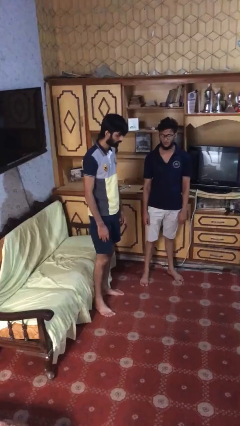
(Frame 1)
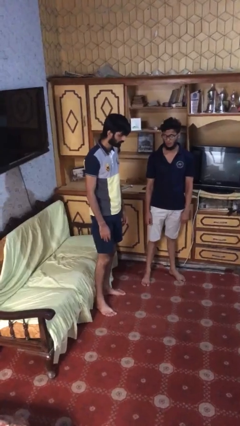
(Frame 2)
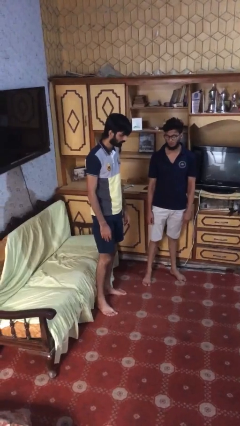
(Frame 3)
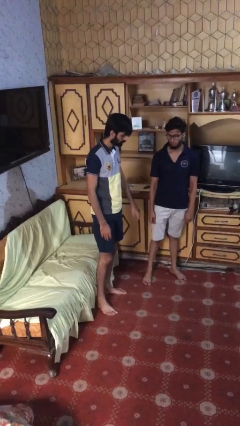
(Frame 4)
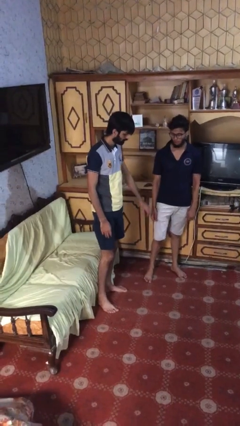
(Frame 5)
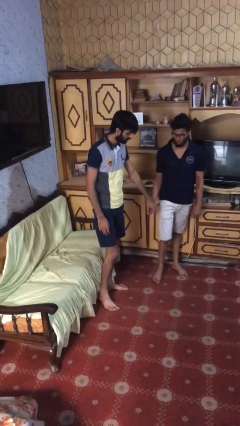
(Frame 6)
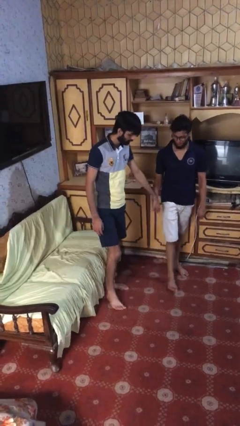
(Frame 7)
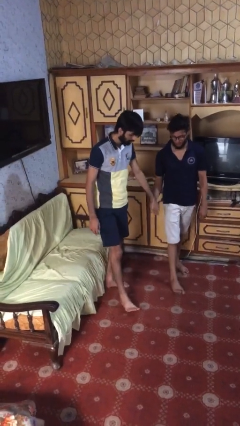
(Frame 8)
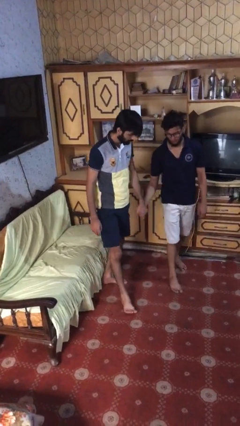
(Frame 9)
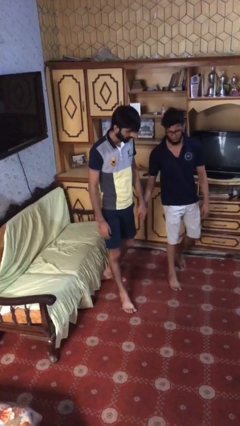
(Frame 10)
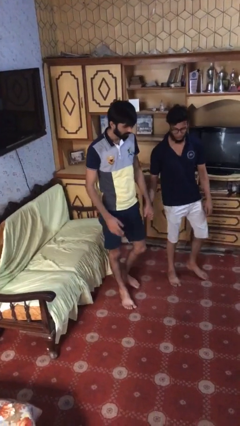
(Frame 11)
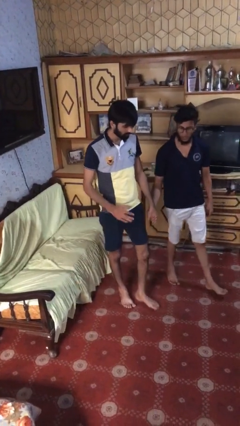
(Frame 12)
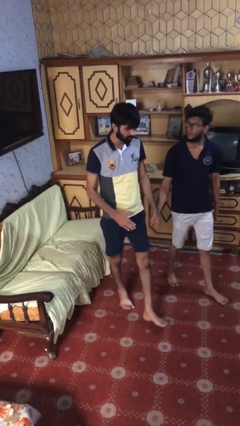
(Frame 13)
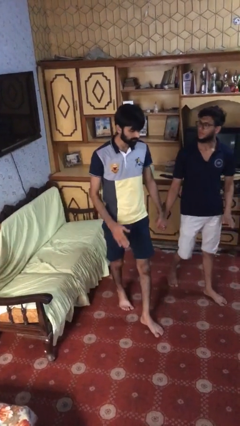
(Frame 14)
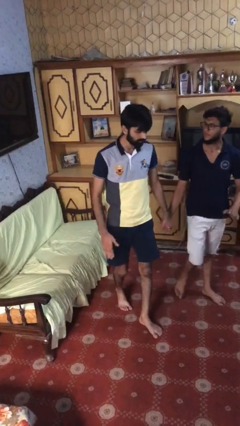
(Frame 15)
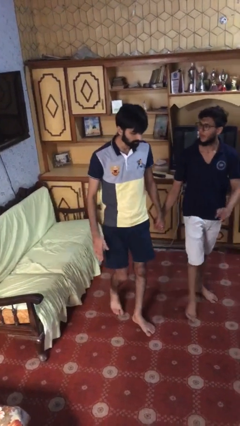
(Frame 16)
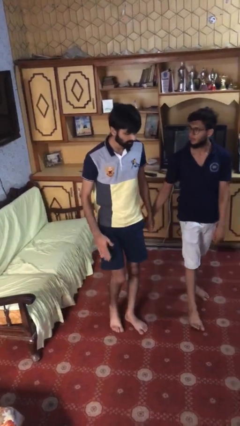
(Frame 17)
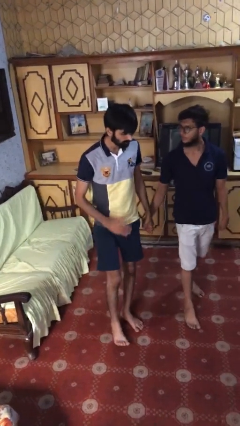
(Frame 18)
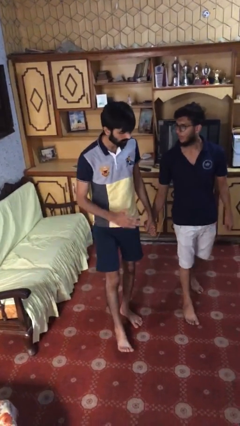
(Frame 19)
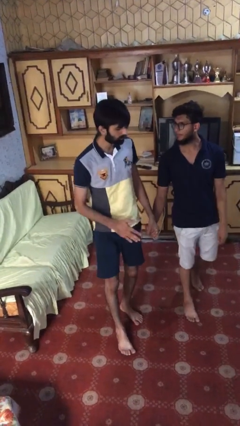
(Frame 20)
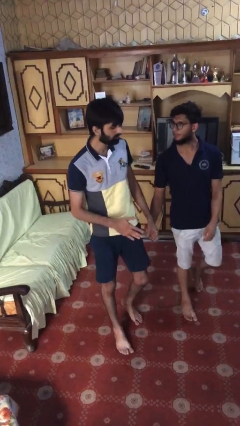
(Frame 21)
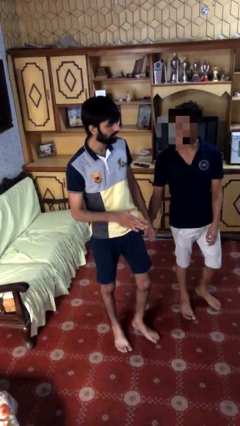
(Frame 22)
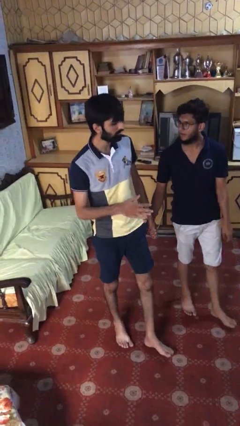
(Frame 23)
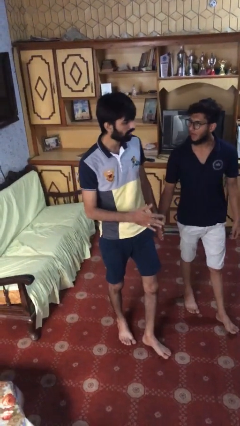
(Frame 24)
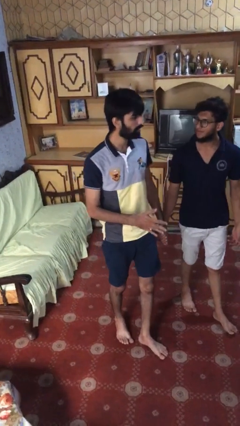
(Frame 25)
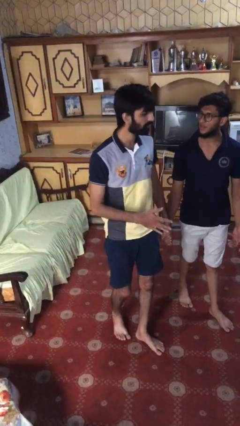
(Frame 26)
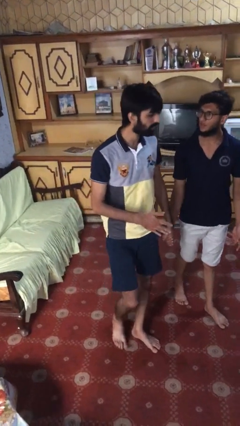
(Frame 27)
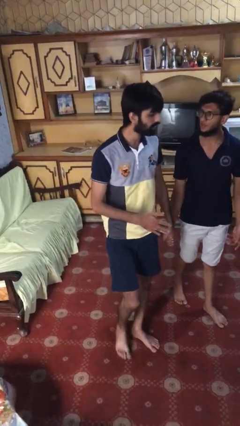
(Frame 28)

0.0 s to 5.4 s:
person holds hand

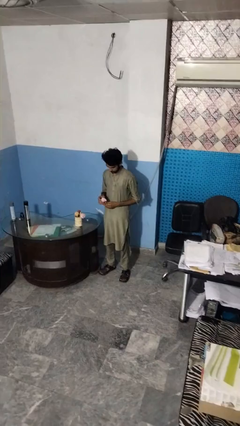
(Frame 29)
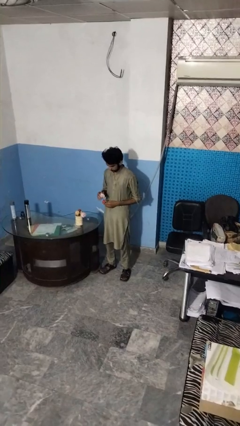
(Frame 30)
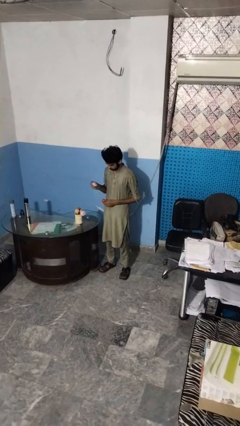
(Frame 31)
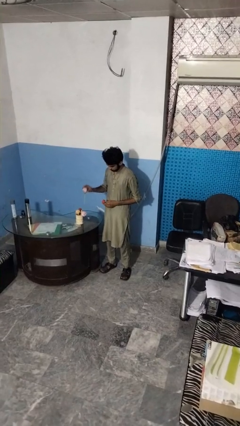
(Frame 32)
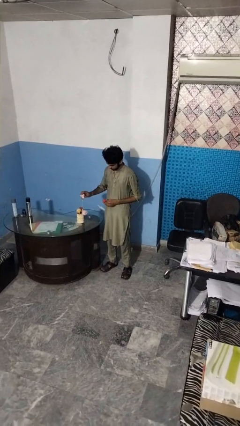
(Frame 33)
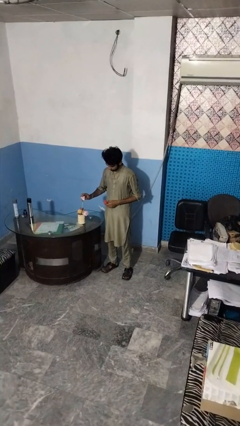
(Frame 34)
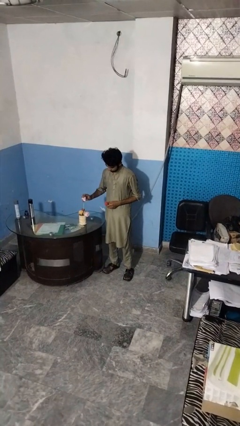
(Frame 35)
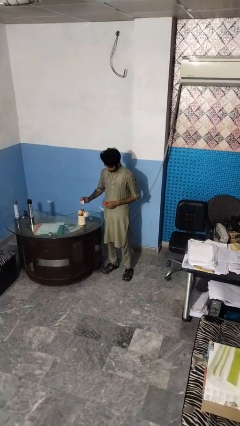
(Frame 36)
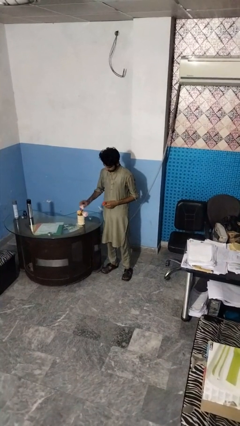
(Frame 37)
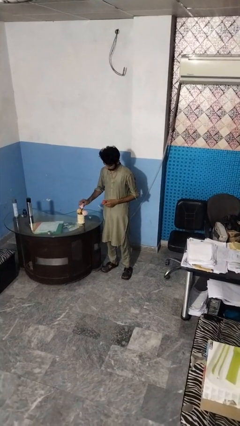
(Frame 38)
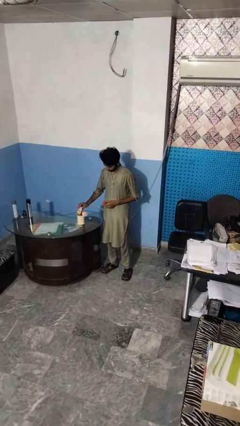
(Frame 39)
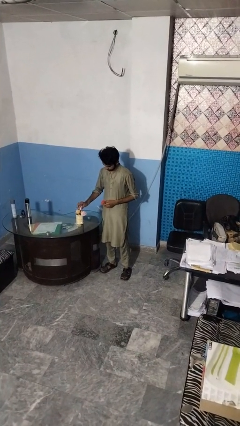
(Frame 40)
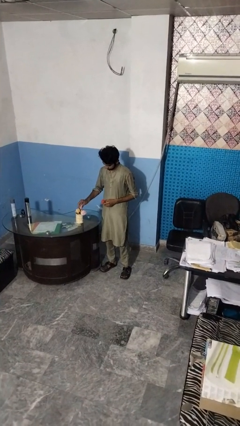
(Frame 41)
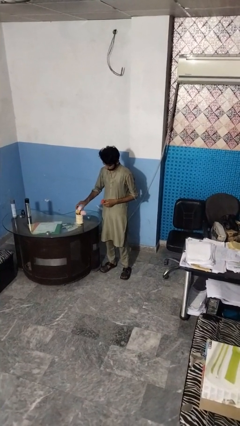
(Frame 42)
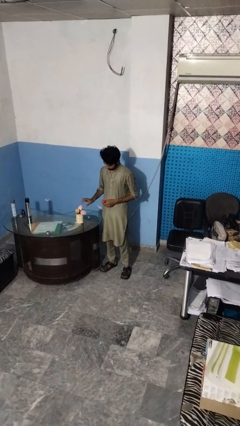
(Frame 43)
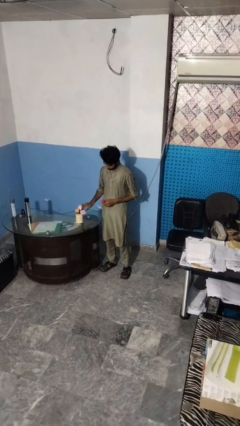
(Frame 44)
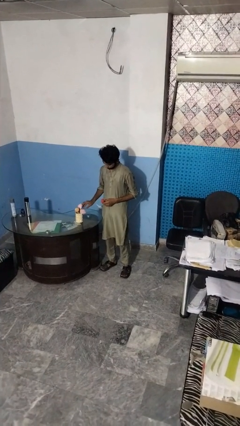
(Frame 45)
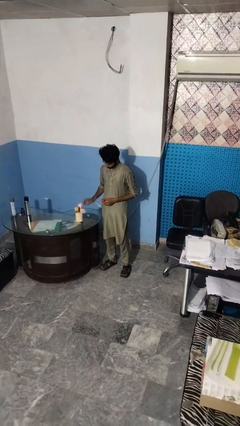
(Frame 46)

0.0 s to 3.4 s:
person arranges flowers in vase

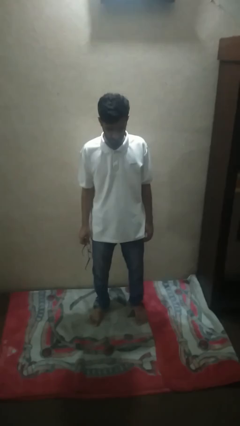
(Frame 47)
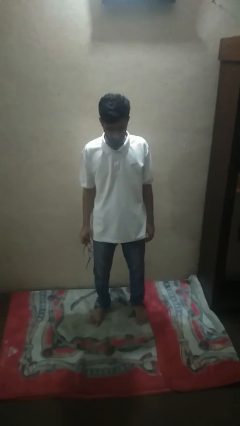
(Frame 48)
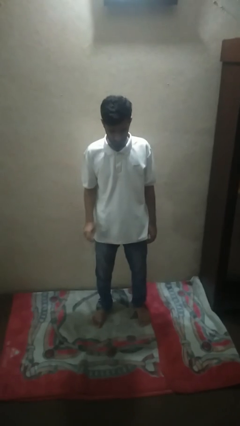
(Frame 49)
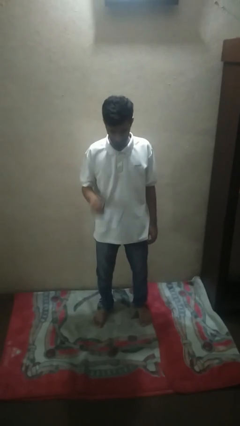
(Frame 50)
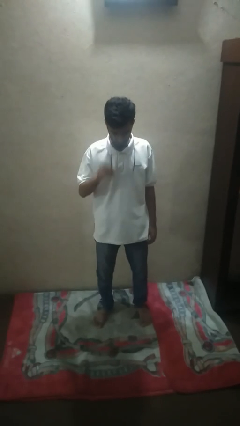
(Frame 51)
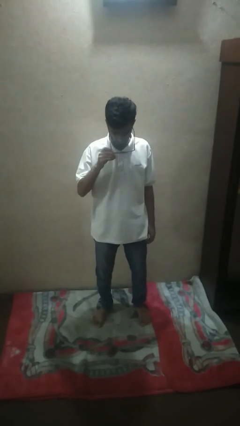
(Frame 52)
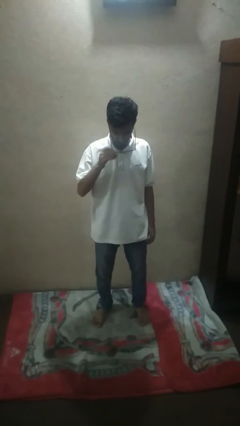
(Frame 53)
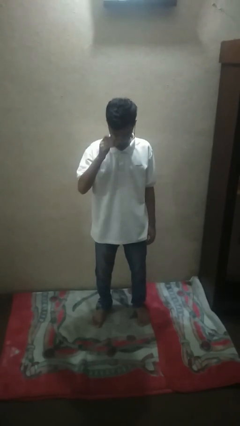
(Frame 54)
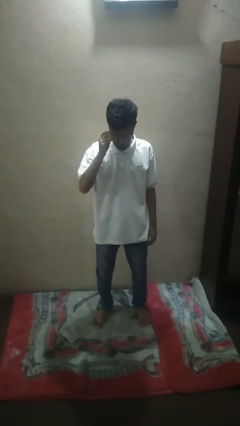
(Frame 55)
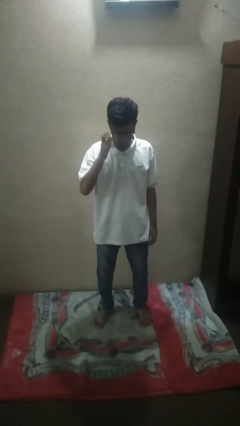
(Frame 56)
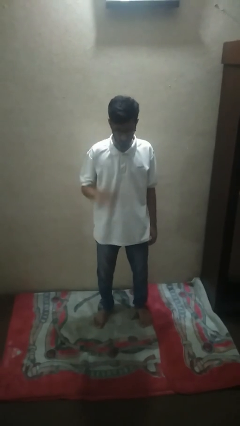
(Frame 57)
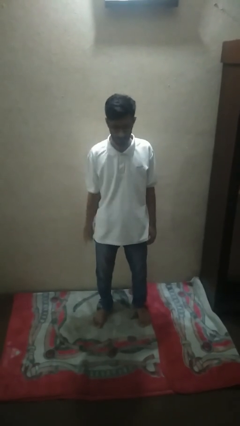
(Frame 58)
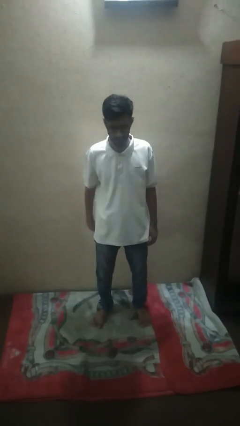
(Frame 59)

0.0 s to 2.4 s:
person puts on glasses

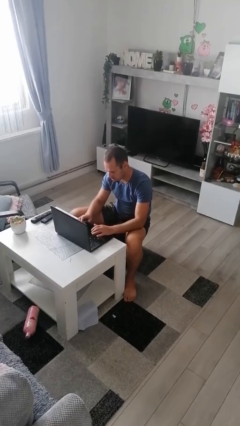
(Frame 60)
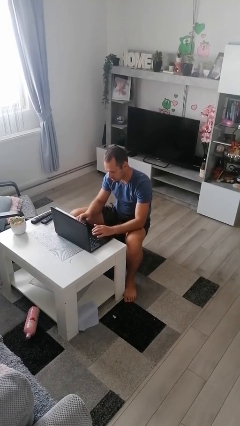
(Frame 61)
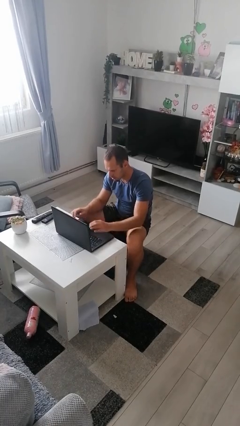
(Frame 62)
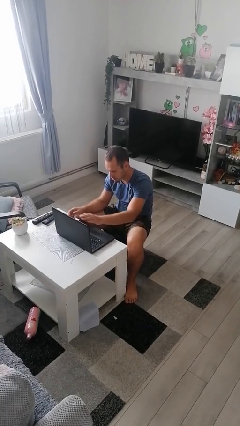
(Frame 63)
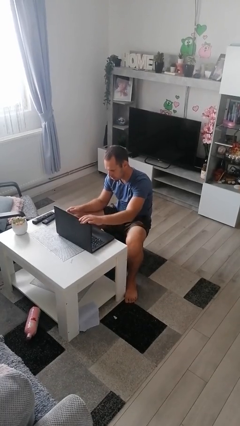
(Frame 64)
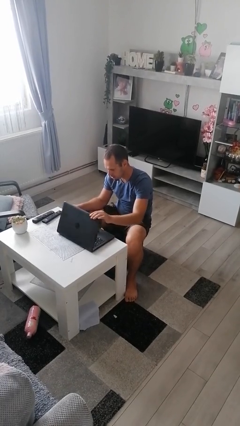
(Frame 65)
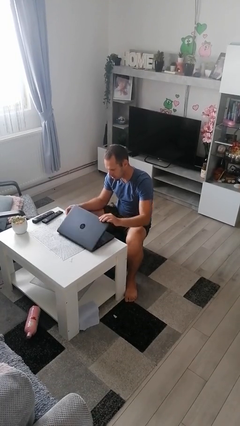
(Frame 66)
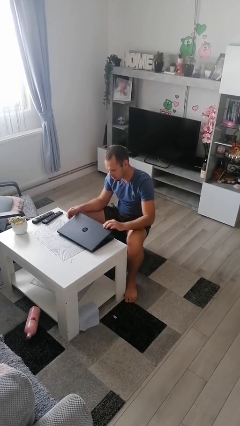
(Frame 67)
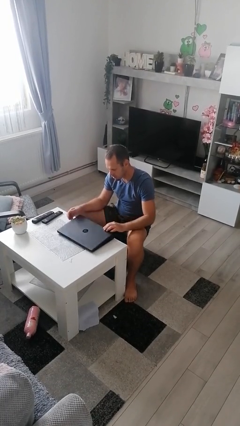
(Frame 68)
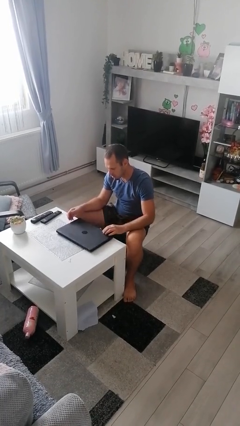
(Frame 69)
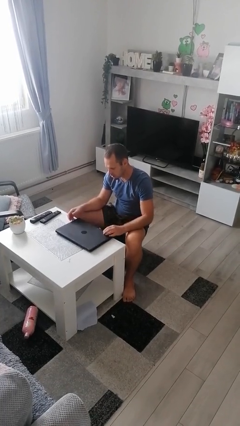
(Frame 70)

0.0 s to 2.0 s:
person closes laptop

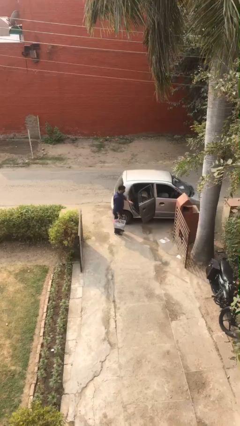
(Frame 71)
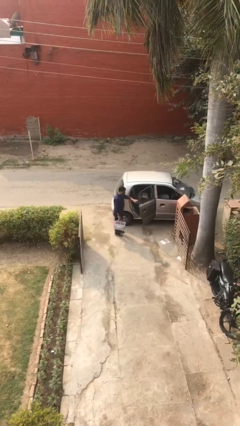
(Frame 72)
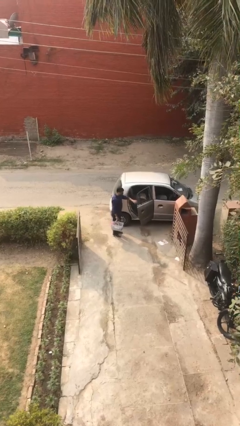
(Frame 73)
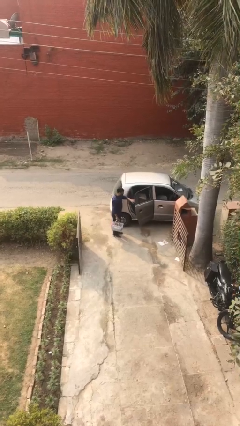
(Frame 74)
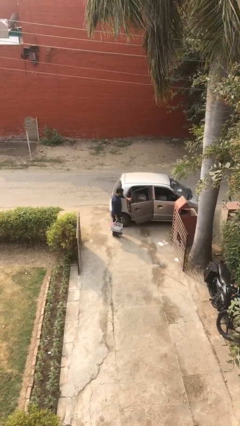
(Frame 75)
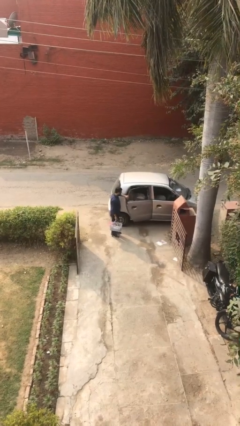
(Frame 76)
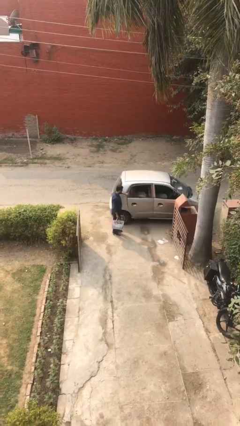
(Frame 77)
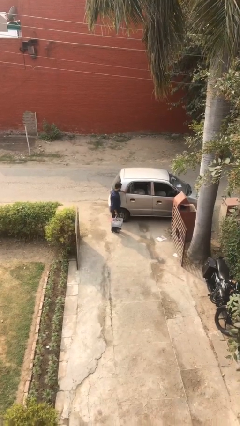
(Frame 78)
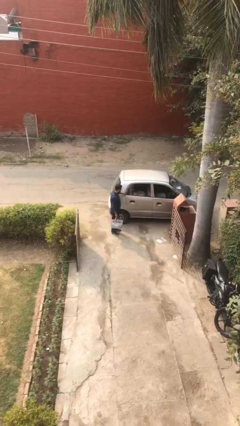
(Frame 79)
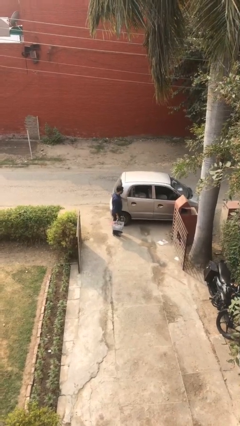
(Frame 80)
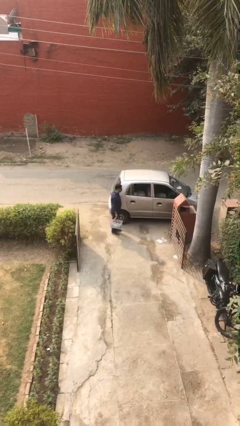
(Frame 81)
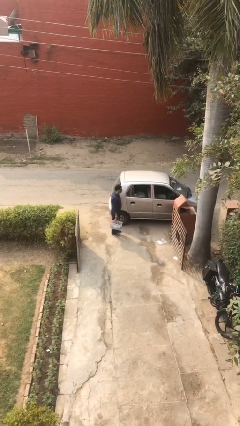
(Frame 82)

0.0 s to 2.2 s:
person closes car door

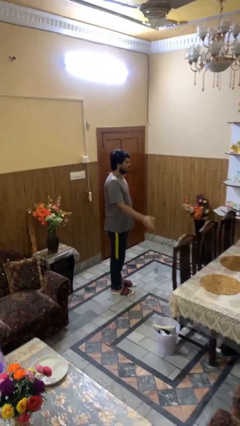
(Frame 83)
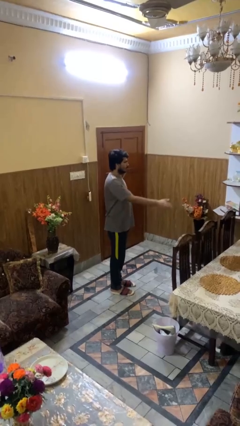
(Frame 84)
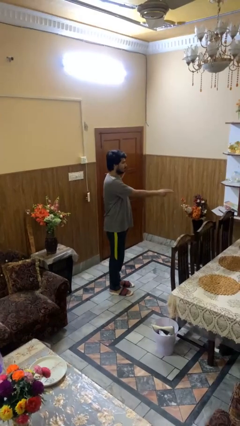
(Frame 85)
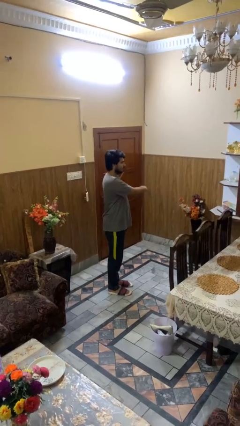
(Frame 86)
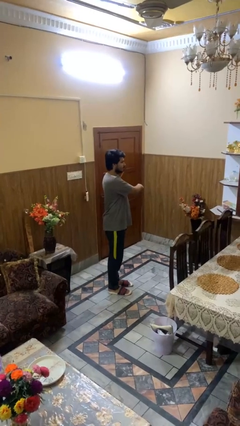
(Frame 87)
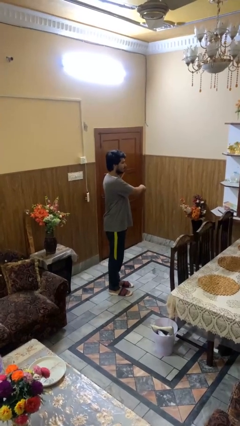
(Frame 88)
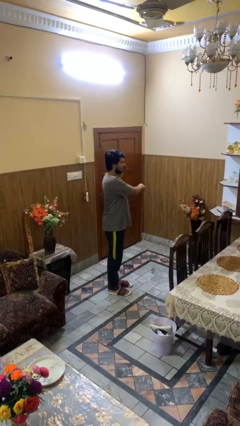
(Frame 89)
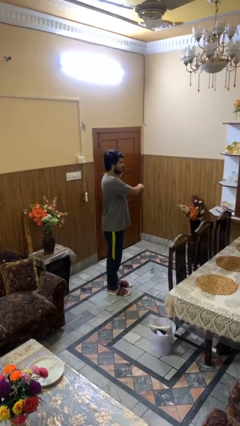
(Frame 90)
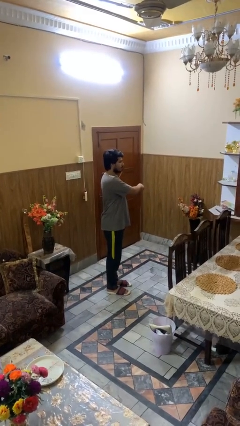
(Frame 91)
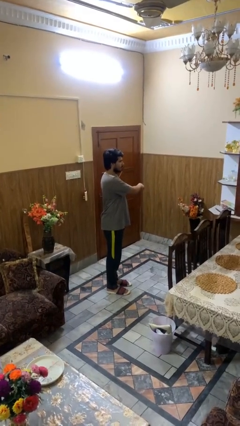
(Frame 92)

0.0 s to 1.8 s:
person gestures swipe left

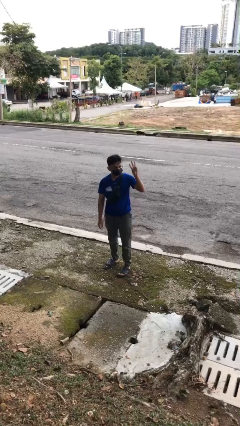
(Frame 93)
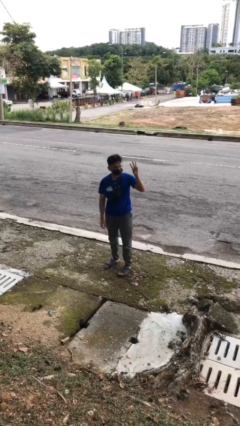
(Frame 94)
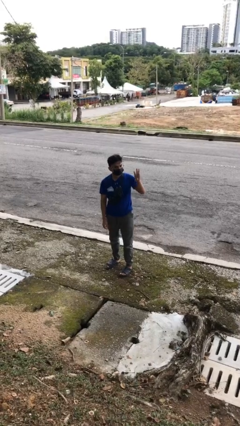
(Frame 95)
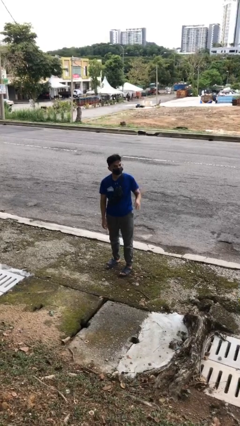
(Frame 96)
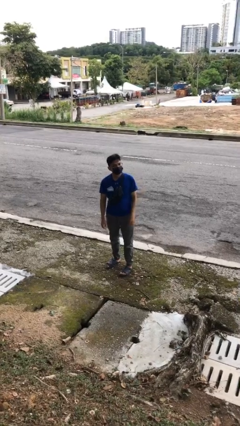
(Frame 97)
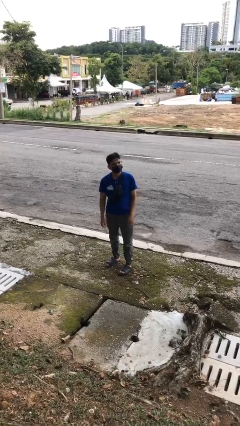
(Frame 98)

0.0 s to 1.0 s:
person gestures number three
